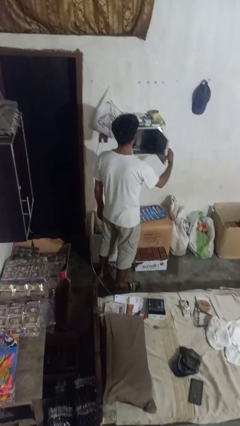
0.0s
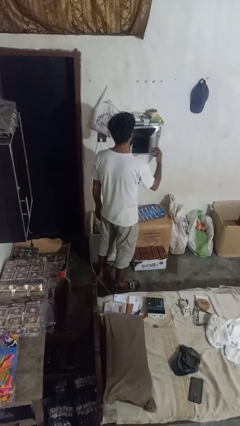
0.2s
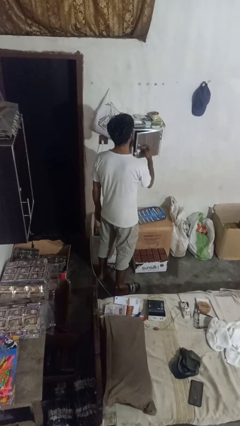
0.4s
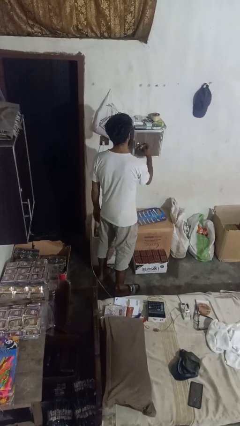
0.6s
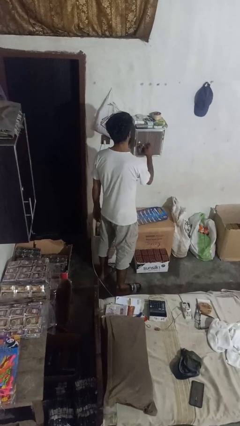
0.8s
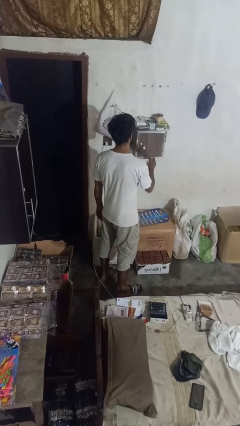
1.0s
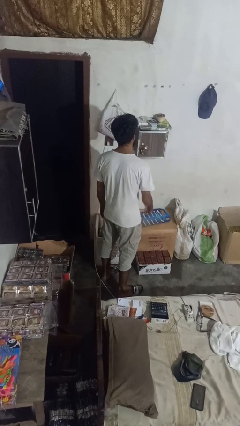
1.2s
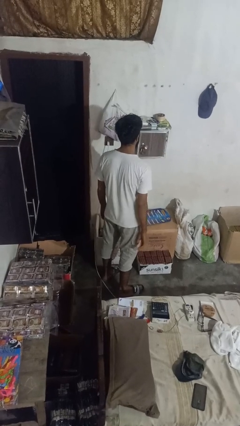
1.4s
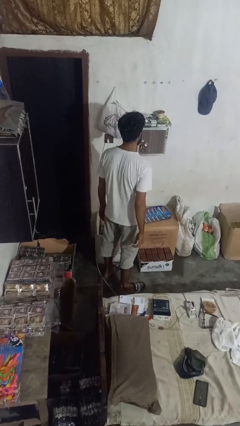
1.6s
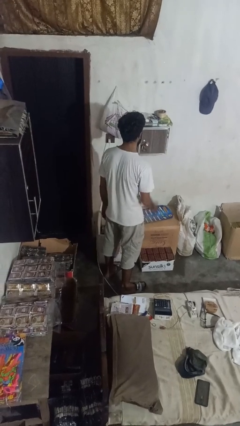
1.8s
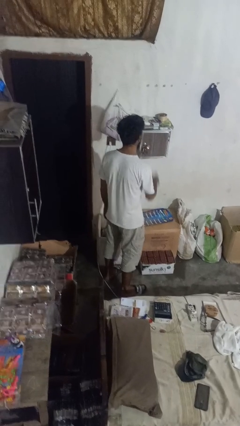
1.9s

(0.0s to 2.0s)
person puts down object into cabinet

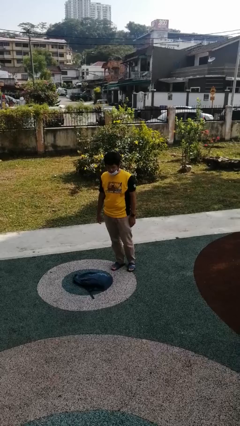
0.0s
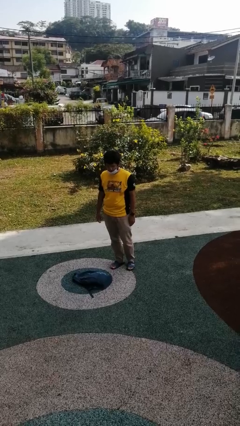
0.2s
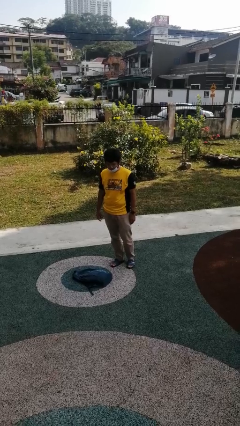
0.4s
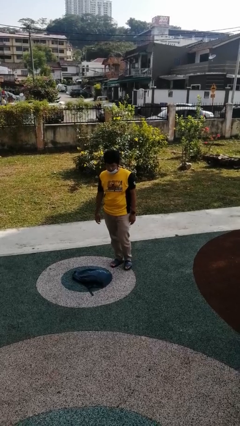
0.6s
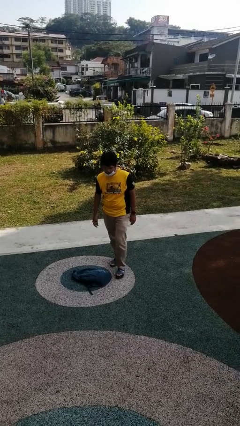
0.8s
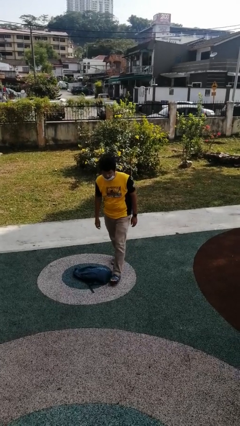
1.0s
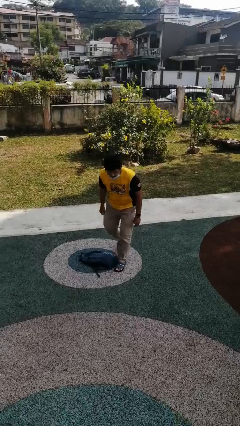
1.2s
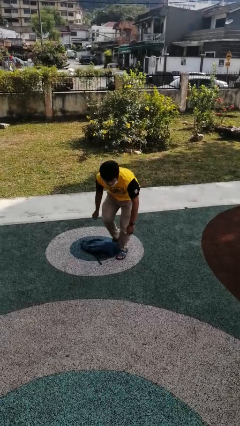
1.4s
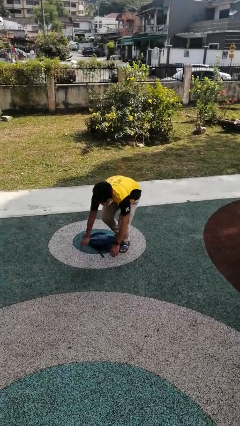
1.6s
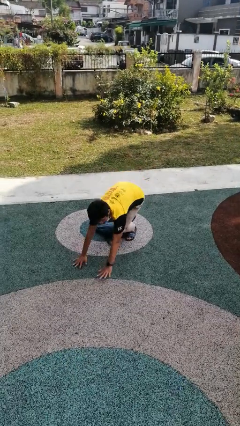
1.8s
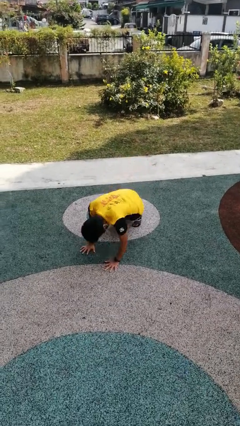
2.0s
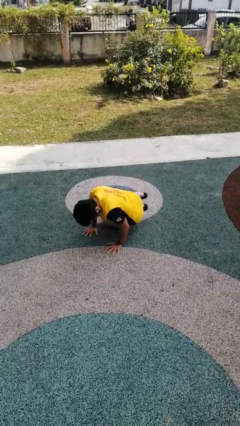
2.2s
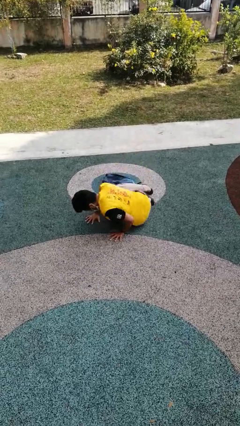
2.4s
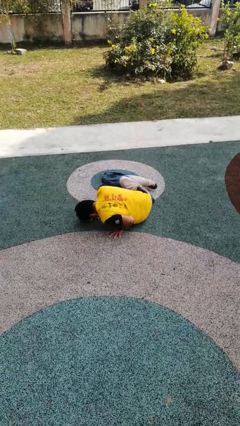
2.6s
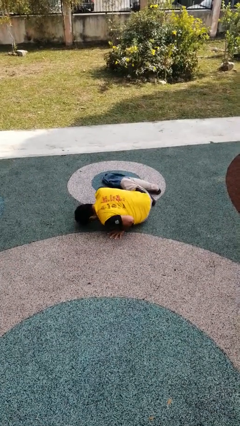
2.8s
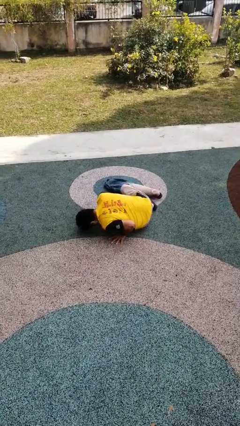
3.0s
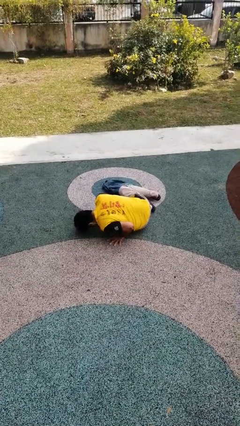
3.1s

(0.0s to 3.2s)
person trips on object on floor

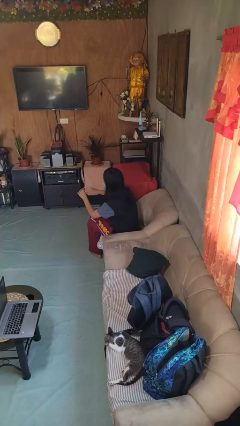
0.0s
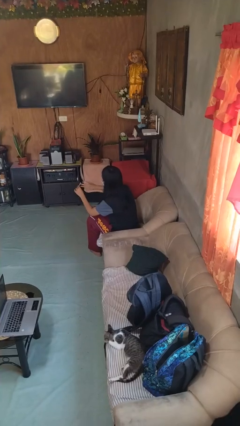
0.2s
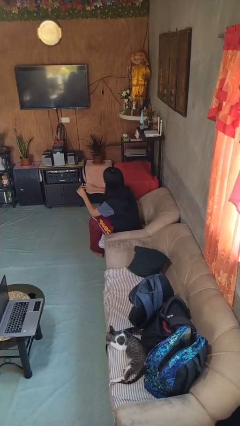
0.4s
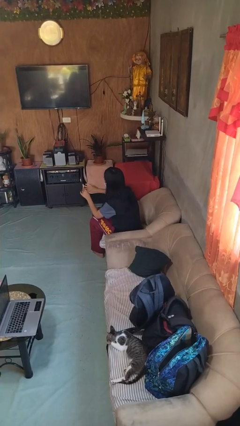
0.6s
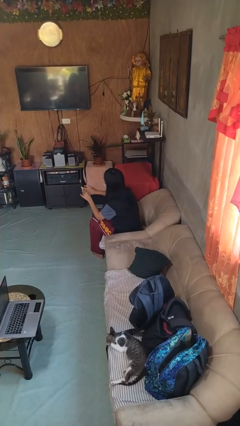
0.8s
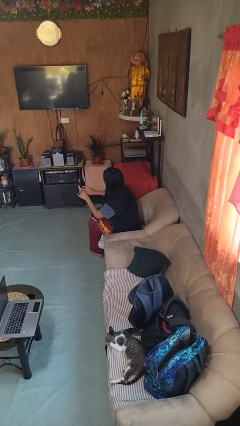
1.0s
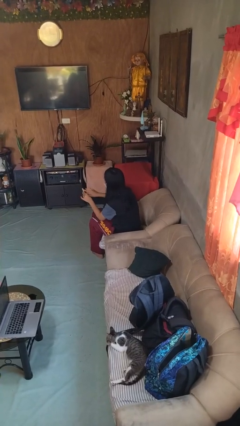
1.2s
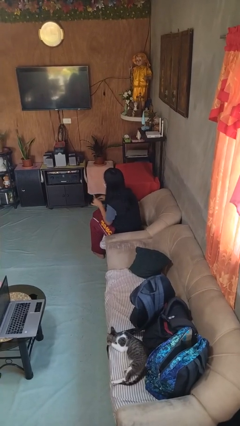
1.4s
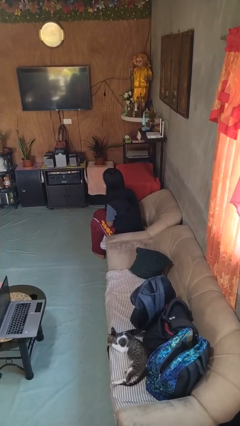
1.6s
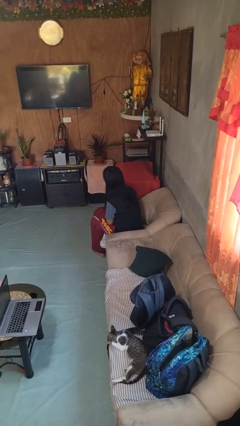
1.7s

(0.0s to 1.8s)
person files fingernails

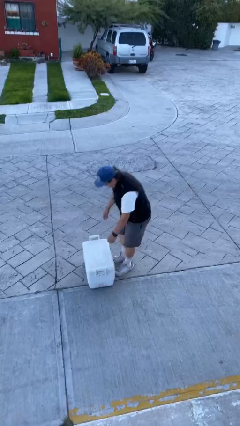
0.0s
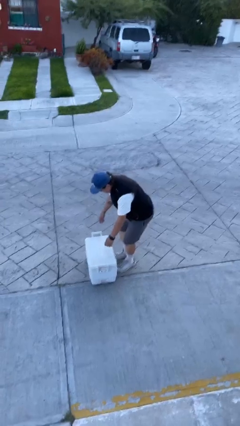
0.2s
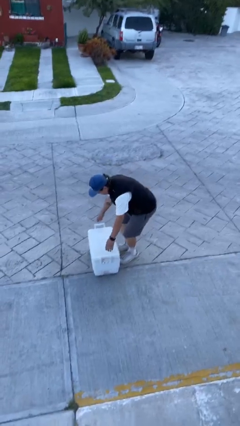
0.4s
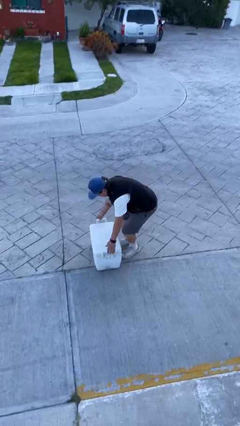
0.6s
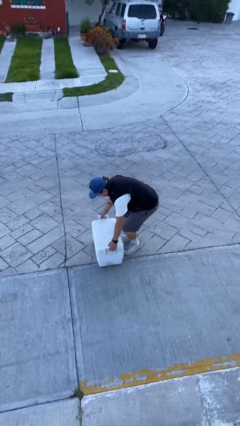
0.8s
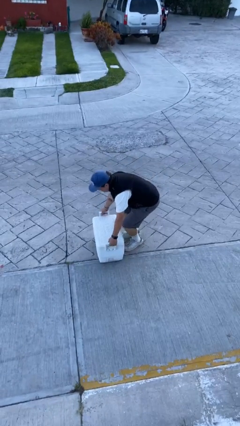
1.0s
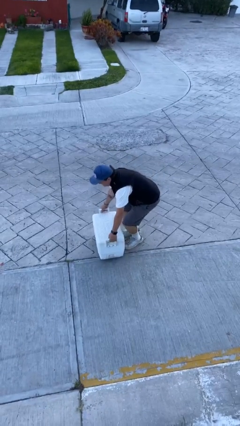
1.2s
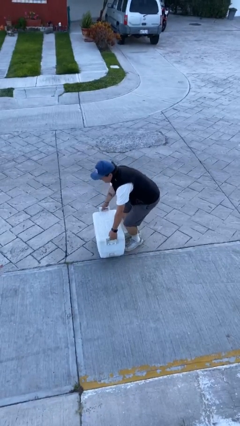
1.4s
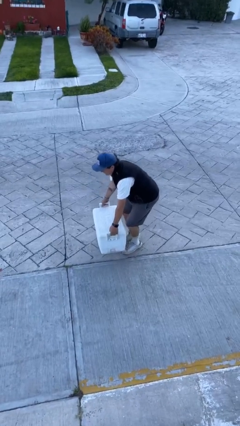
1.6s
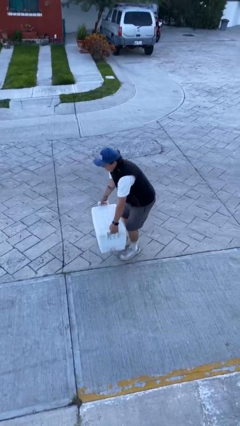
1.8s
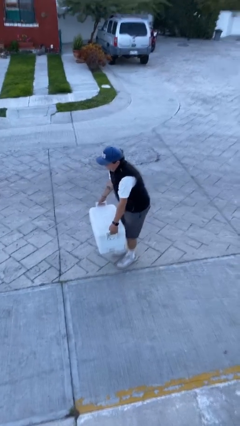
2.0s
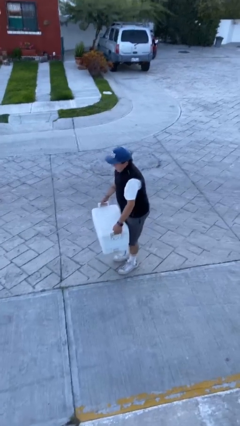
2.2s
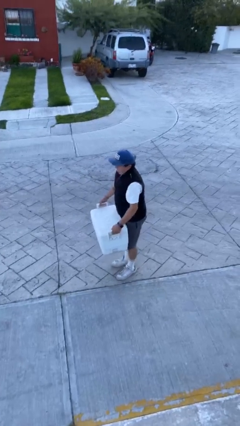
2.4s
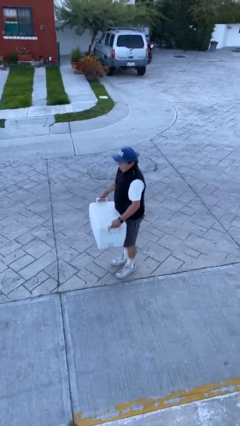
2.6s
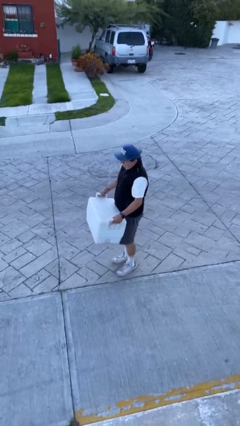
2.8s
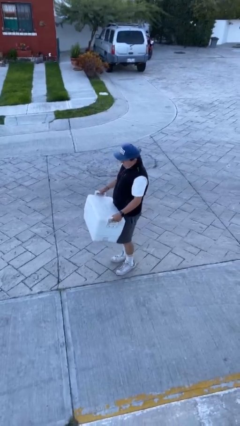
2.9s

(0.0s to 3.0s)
person picks up object from floor

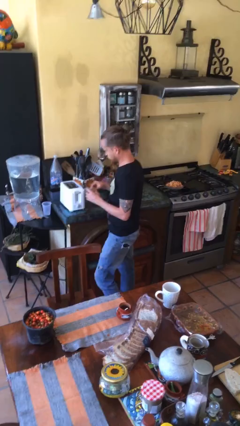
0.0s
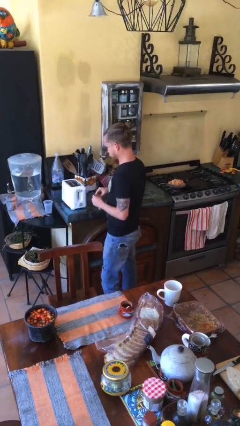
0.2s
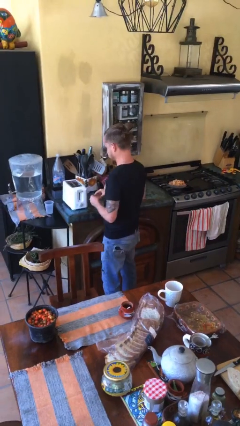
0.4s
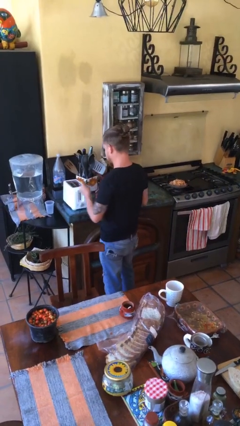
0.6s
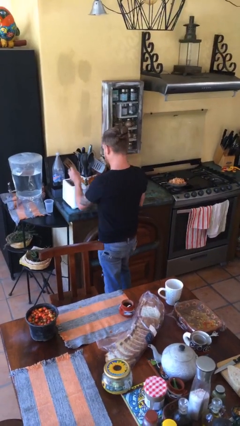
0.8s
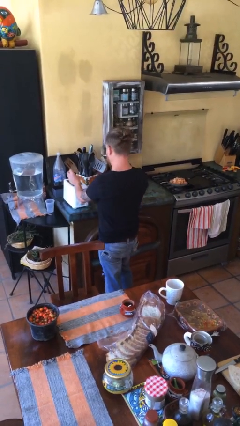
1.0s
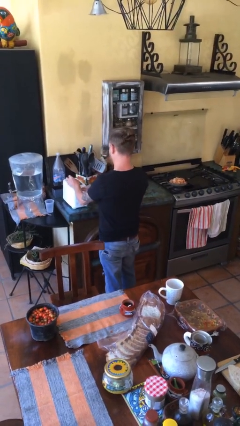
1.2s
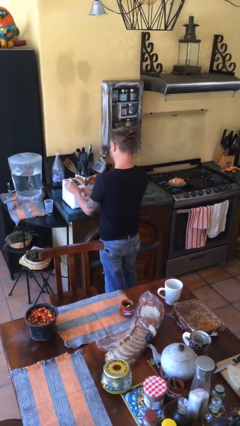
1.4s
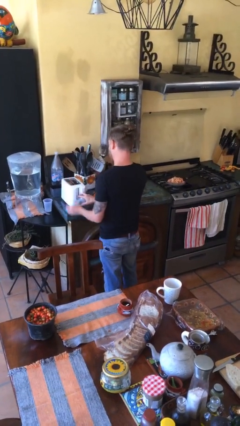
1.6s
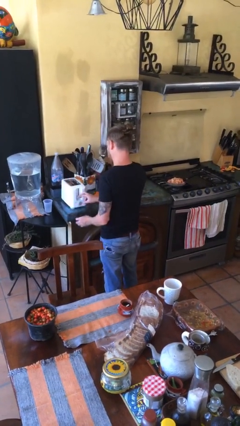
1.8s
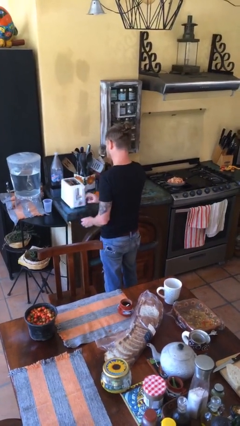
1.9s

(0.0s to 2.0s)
person puts object into toaster

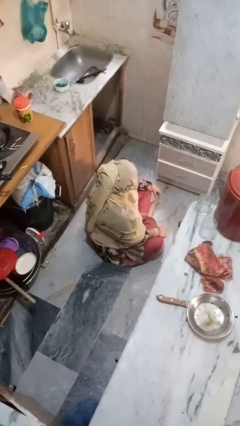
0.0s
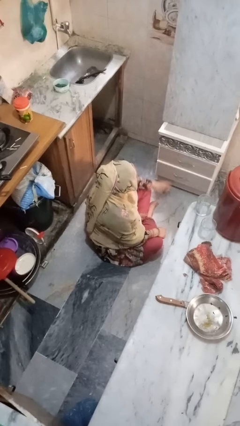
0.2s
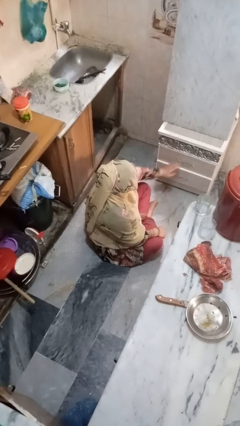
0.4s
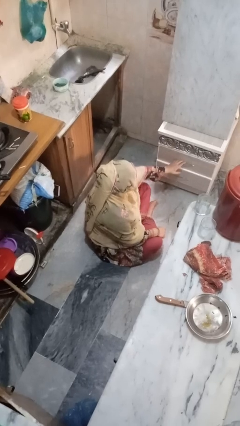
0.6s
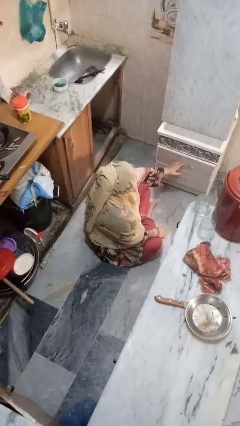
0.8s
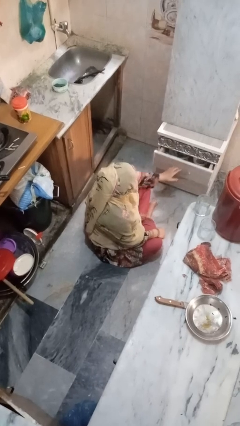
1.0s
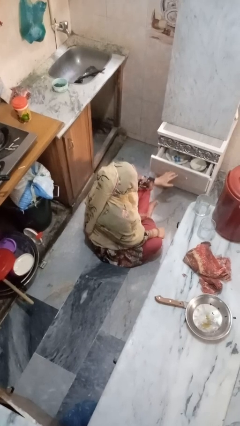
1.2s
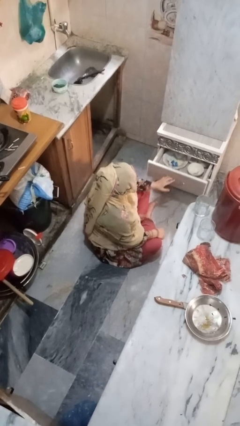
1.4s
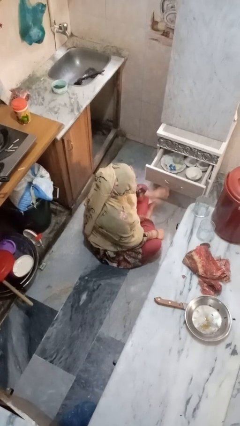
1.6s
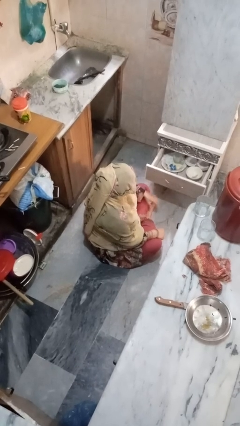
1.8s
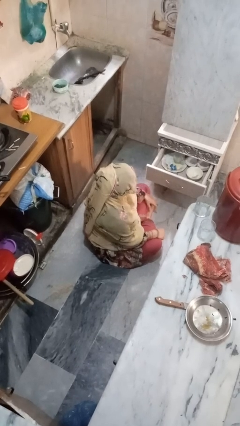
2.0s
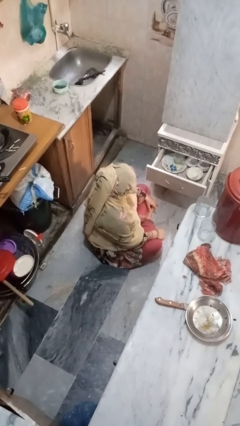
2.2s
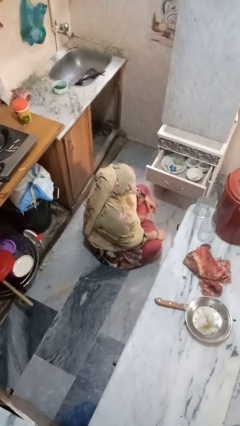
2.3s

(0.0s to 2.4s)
person opens kitchen drawer

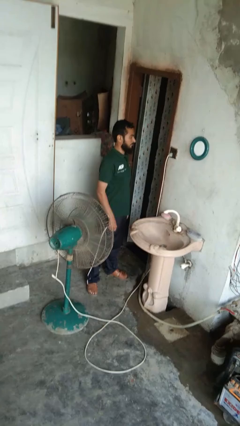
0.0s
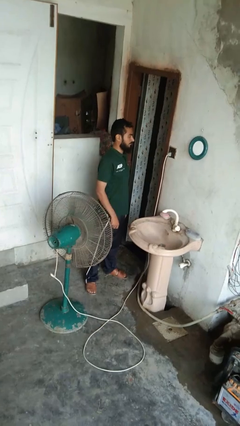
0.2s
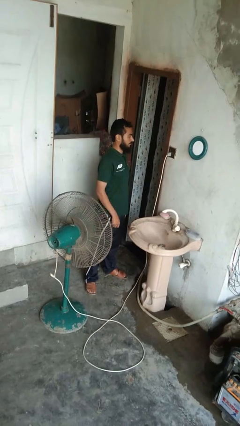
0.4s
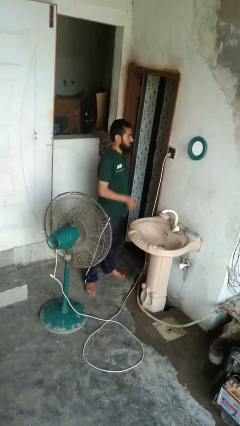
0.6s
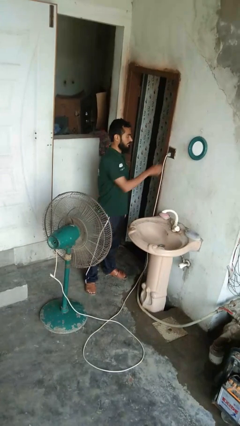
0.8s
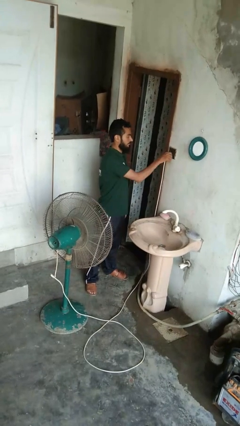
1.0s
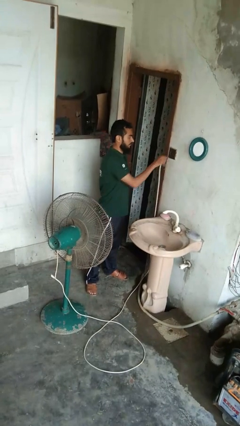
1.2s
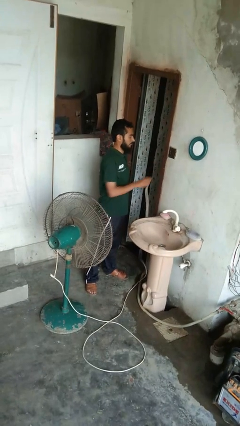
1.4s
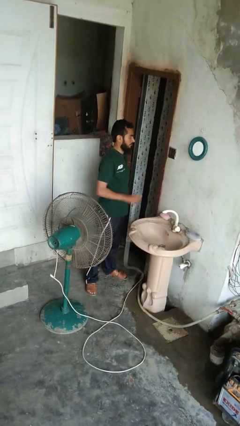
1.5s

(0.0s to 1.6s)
person turns off fan

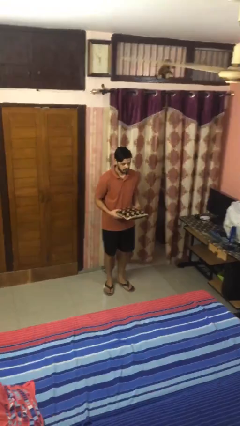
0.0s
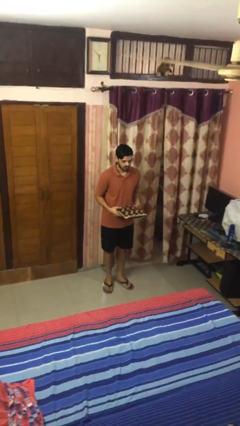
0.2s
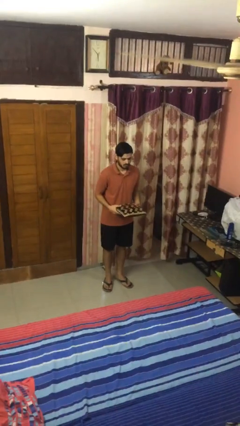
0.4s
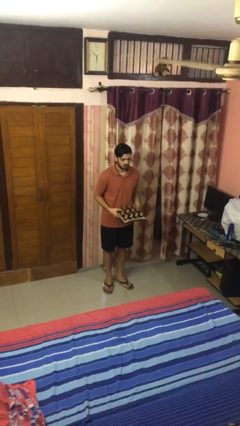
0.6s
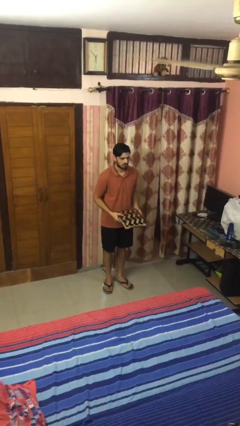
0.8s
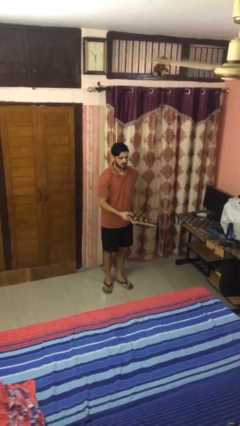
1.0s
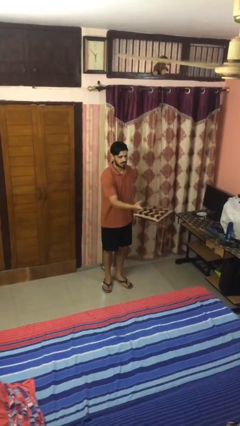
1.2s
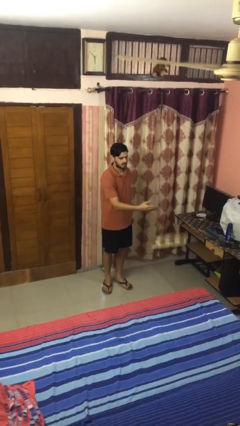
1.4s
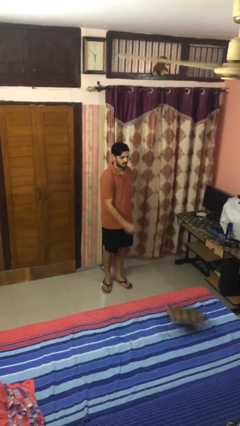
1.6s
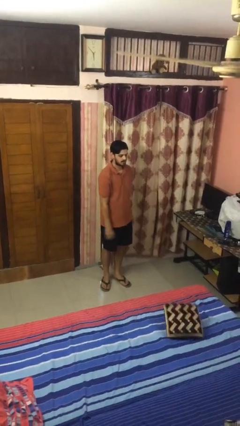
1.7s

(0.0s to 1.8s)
person throws object on bed
